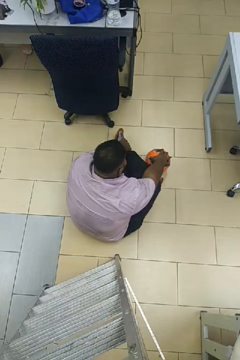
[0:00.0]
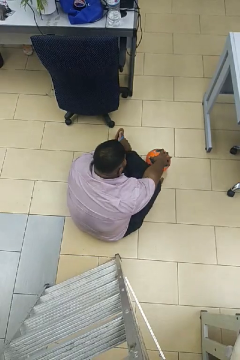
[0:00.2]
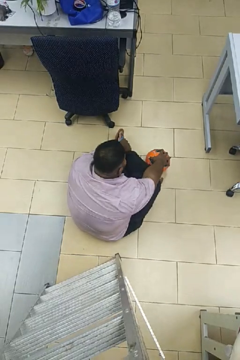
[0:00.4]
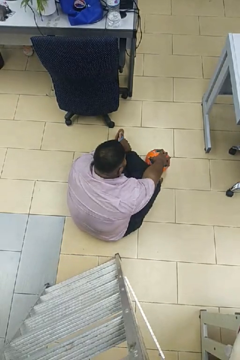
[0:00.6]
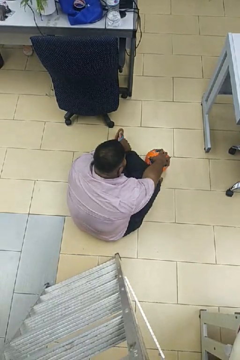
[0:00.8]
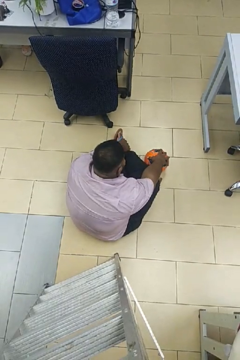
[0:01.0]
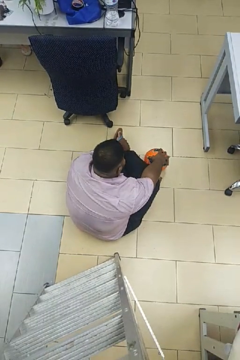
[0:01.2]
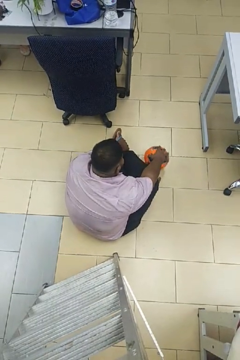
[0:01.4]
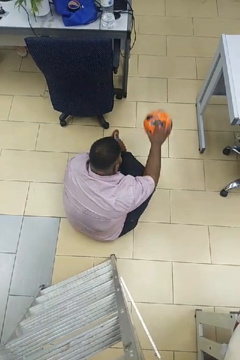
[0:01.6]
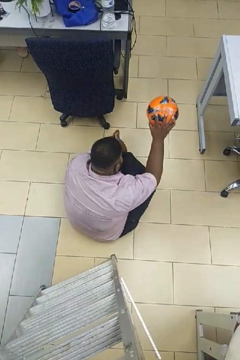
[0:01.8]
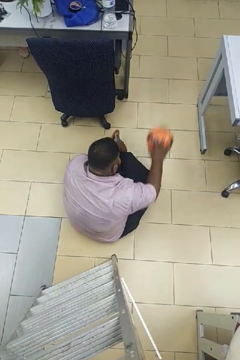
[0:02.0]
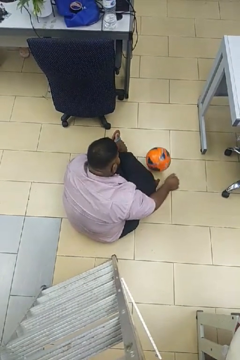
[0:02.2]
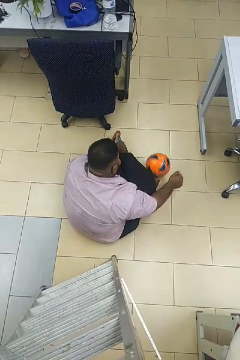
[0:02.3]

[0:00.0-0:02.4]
person bounces ball on floor

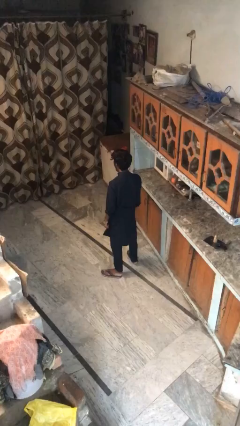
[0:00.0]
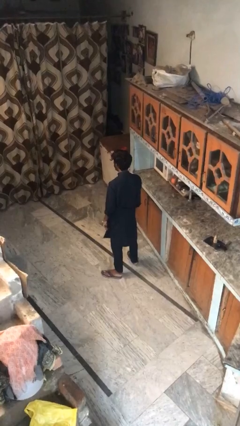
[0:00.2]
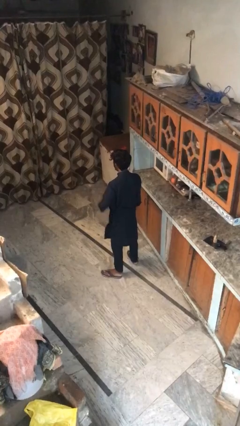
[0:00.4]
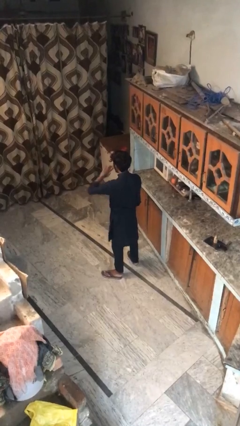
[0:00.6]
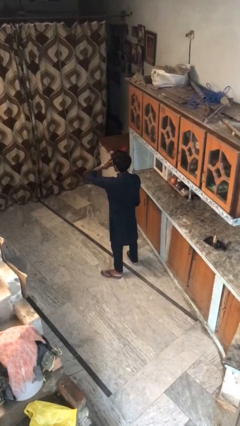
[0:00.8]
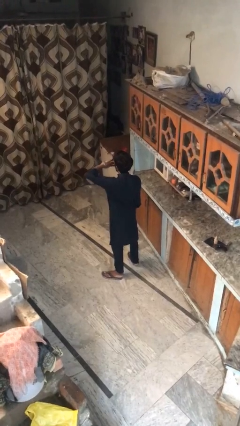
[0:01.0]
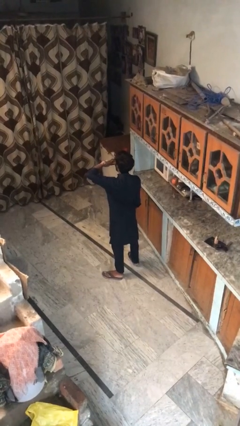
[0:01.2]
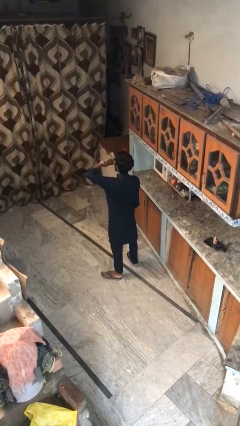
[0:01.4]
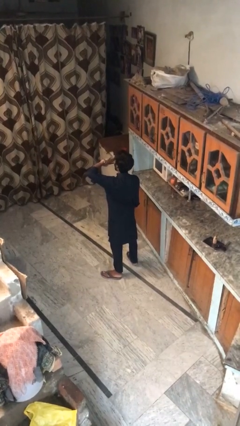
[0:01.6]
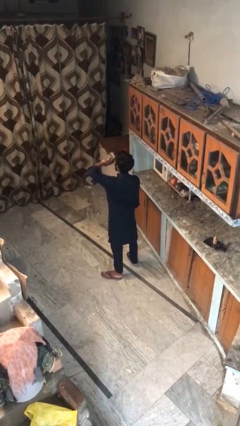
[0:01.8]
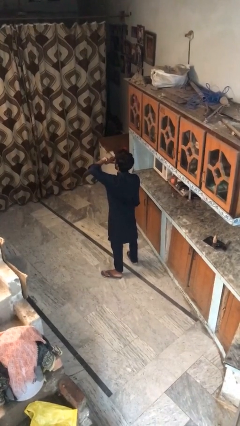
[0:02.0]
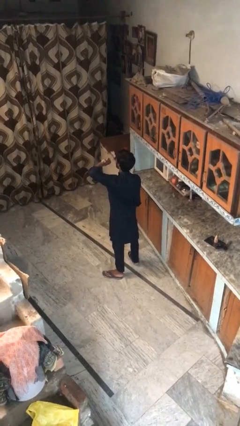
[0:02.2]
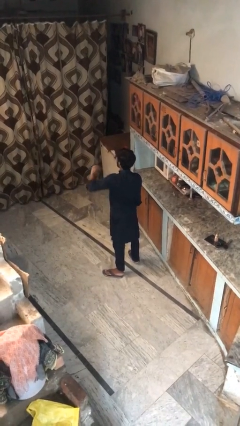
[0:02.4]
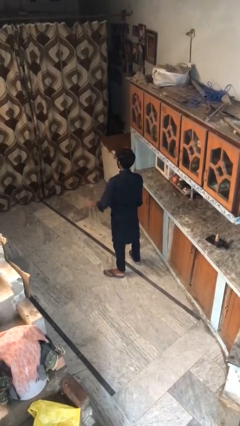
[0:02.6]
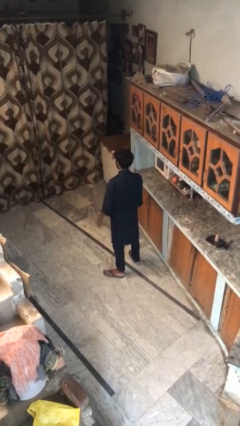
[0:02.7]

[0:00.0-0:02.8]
person yawns

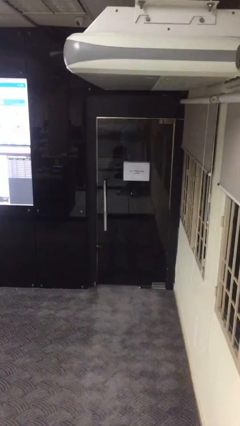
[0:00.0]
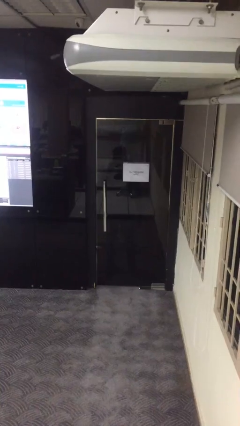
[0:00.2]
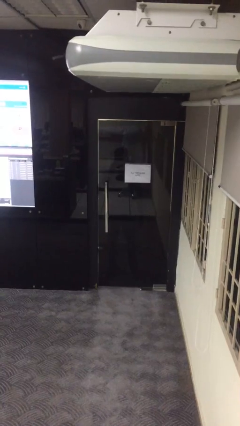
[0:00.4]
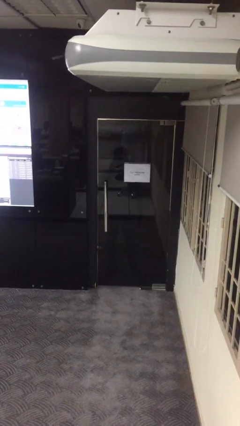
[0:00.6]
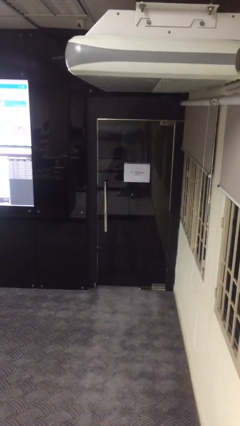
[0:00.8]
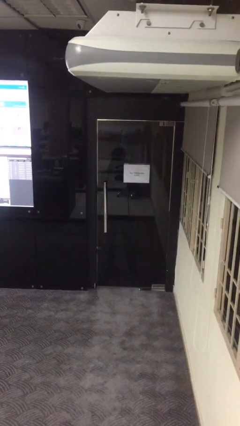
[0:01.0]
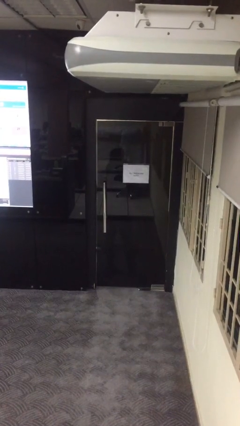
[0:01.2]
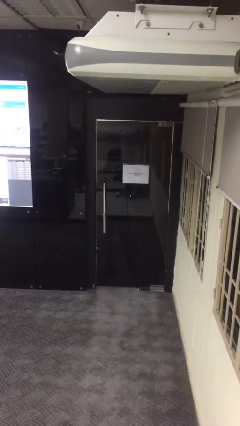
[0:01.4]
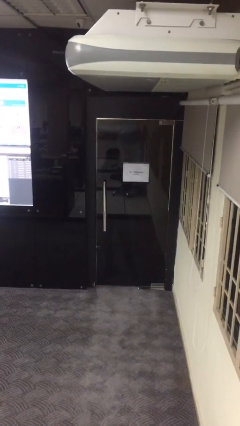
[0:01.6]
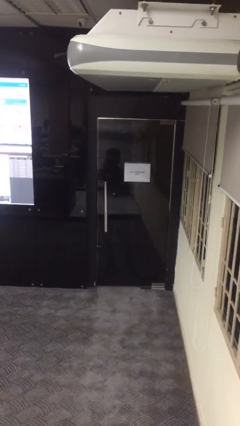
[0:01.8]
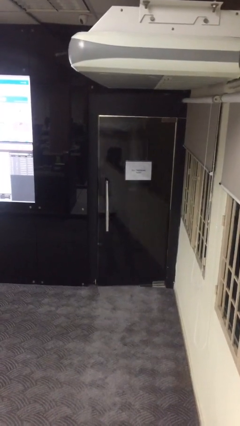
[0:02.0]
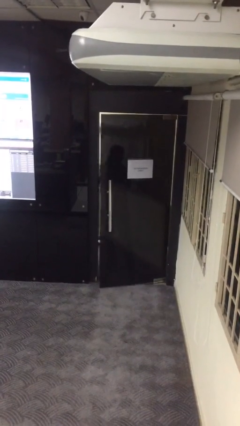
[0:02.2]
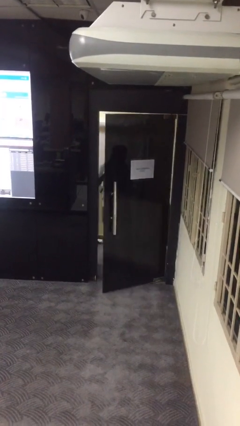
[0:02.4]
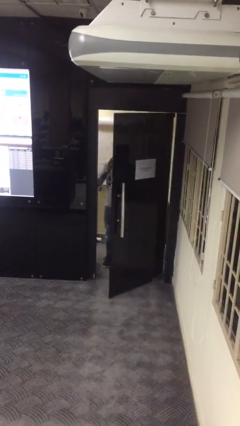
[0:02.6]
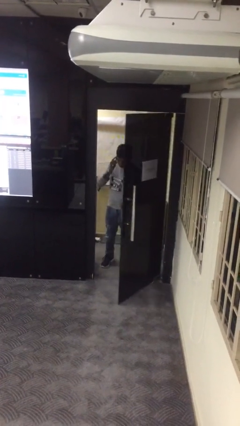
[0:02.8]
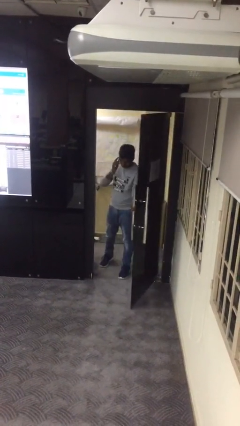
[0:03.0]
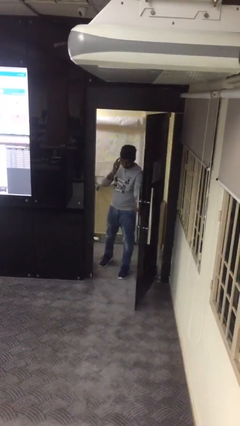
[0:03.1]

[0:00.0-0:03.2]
person opens facility door

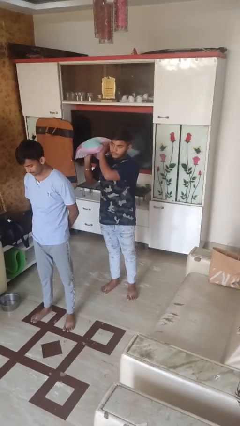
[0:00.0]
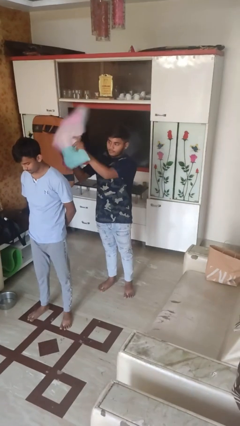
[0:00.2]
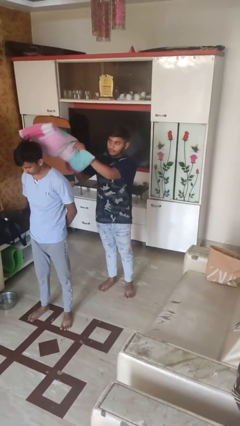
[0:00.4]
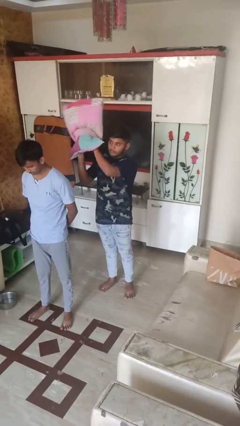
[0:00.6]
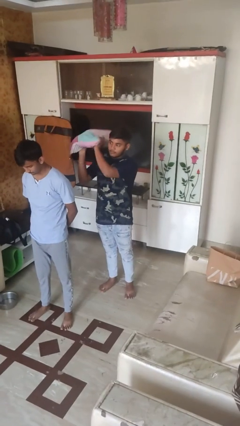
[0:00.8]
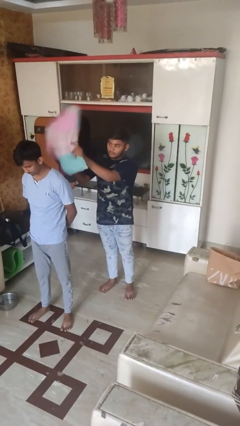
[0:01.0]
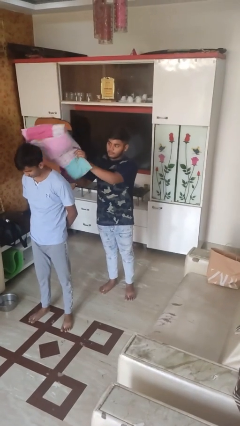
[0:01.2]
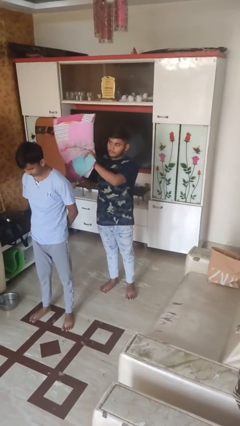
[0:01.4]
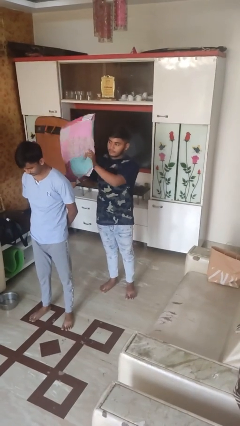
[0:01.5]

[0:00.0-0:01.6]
person hits person with pillow

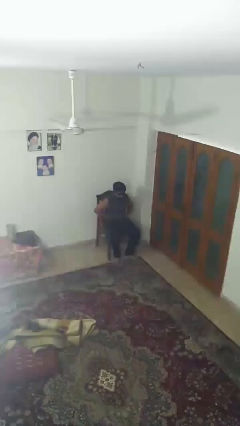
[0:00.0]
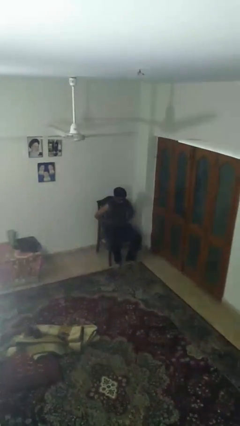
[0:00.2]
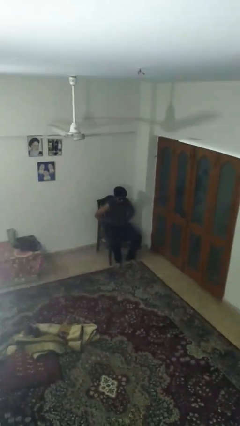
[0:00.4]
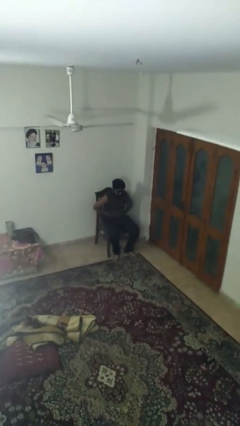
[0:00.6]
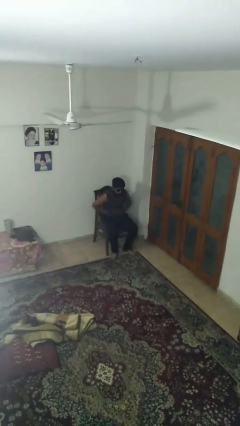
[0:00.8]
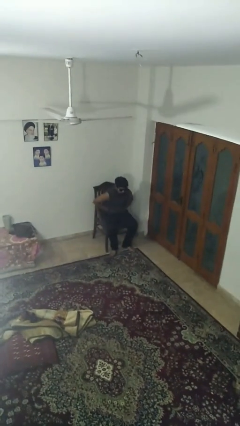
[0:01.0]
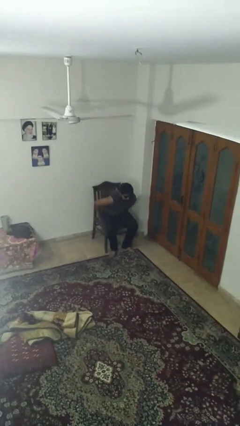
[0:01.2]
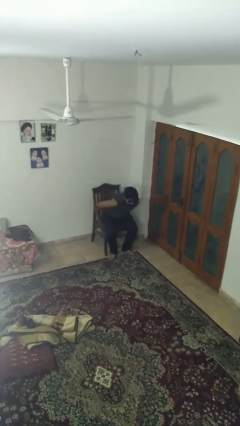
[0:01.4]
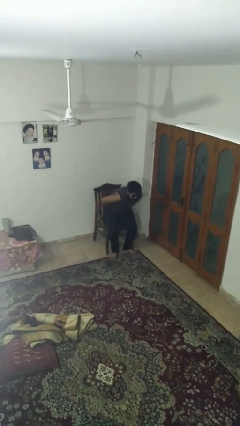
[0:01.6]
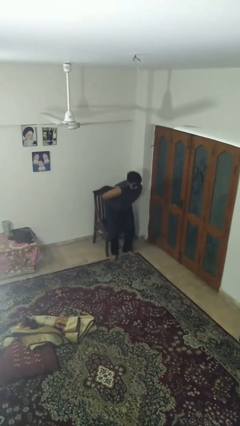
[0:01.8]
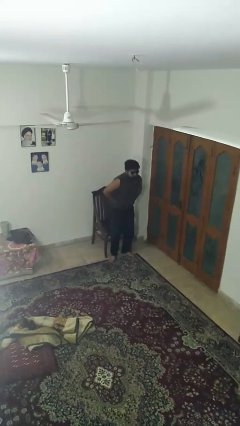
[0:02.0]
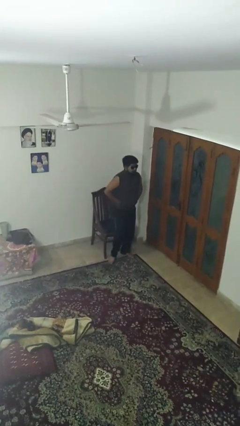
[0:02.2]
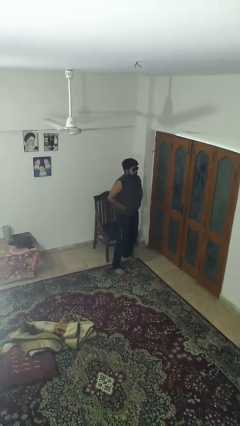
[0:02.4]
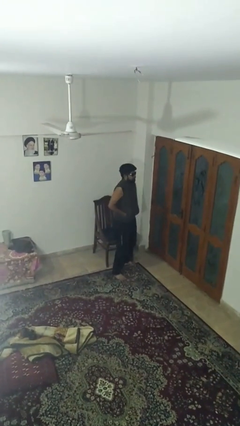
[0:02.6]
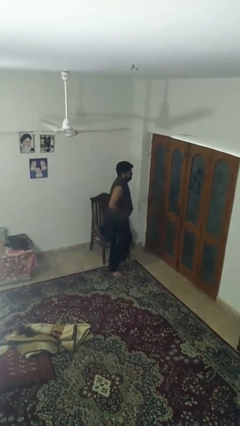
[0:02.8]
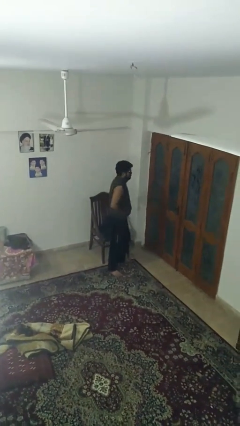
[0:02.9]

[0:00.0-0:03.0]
person stands up

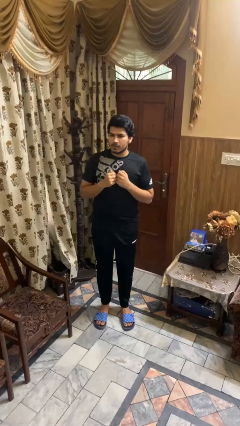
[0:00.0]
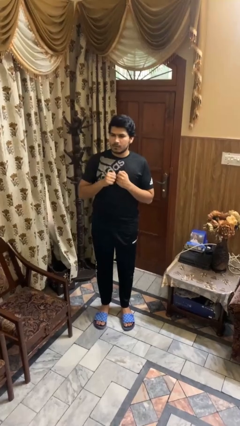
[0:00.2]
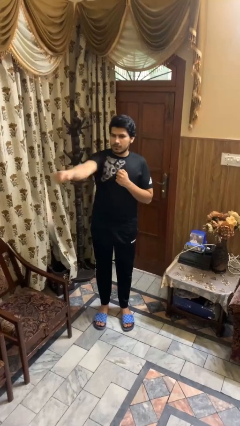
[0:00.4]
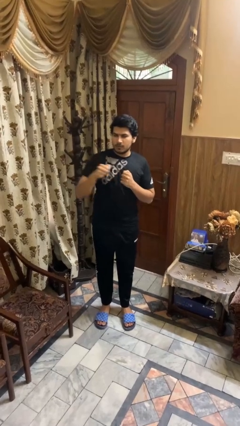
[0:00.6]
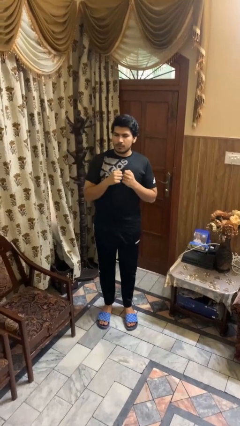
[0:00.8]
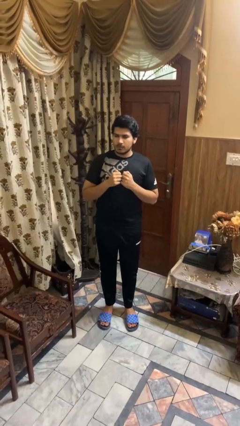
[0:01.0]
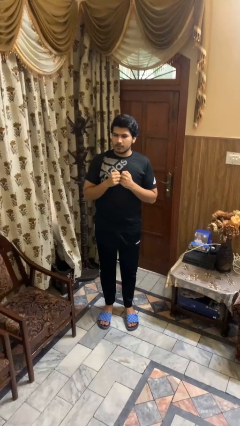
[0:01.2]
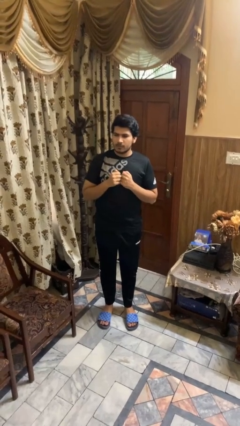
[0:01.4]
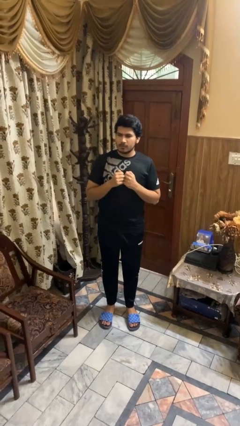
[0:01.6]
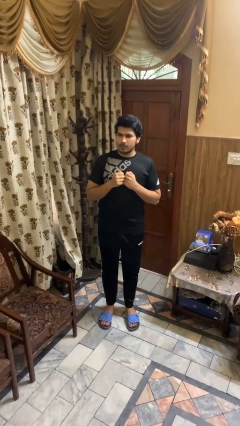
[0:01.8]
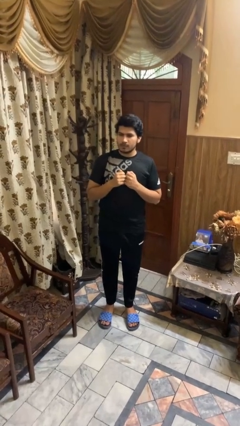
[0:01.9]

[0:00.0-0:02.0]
person karate chop

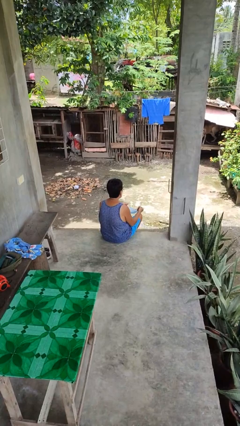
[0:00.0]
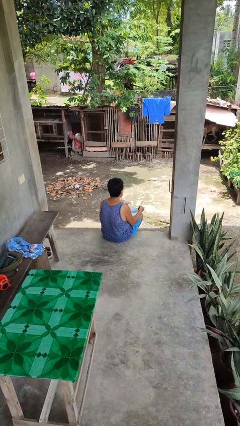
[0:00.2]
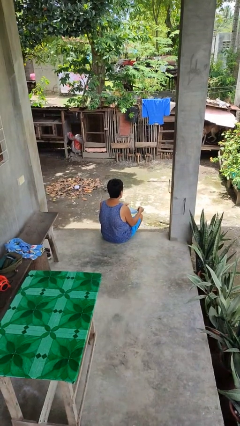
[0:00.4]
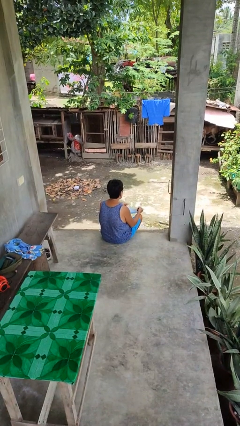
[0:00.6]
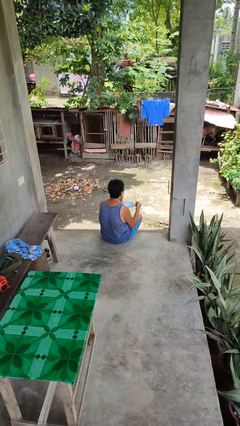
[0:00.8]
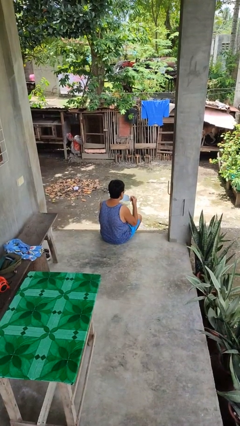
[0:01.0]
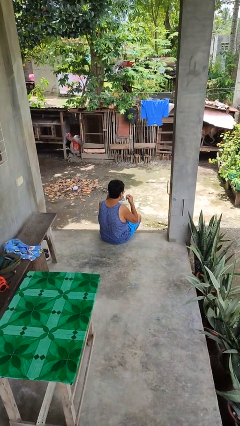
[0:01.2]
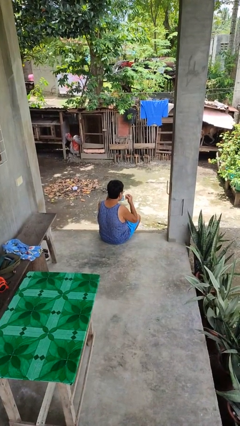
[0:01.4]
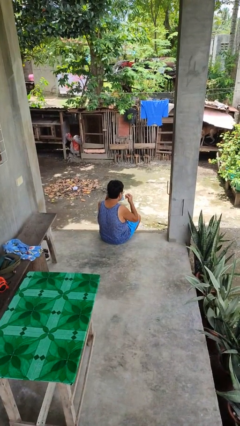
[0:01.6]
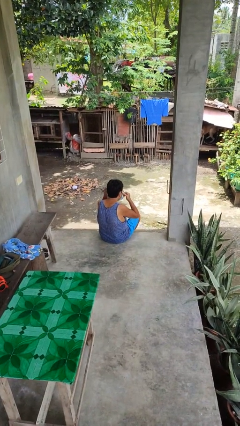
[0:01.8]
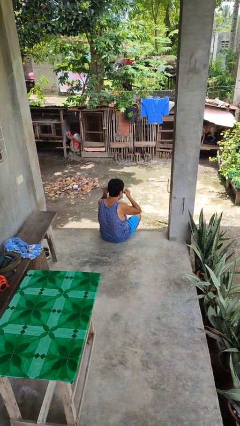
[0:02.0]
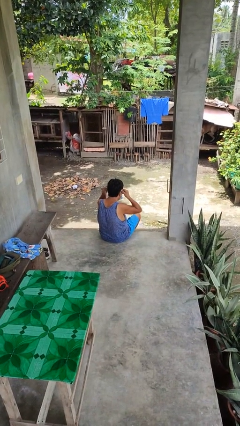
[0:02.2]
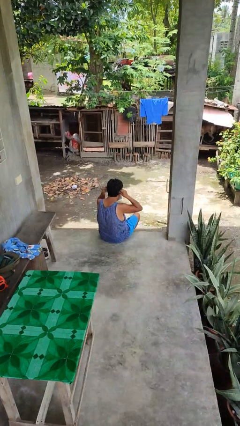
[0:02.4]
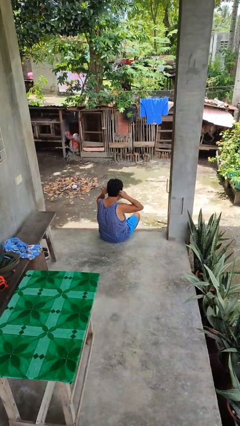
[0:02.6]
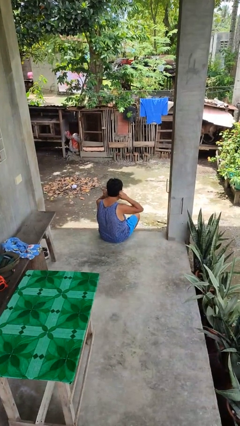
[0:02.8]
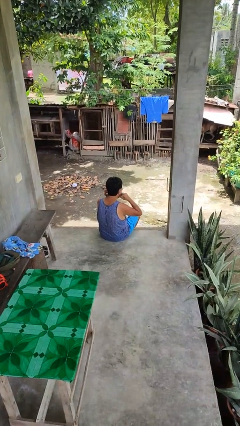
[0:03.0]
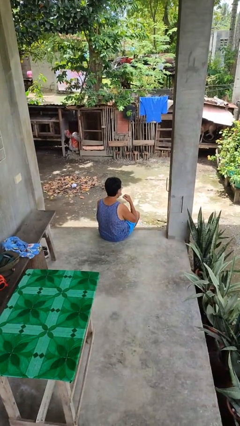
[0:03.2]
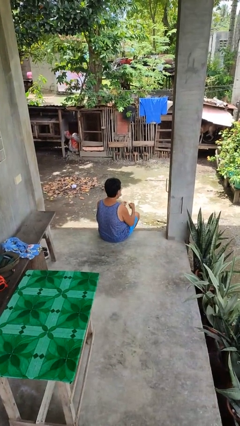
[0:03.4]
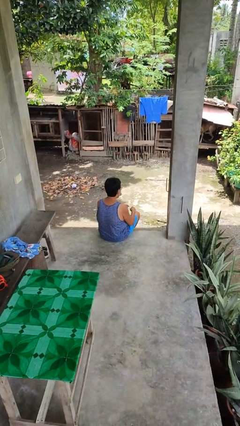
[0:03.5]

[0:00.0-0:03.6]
person puts on facemask
